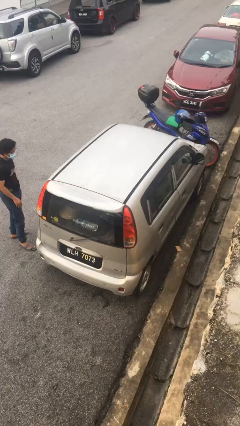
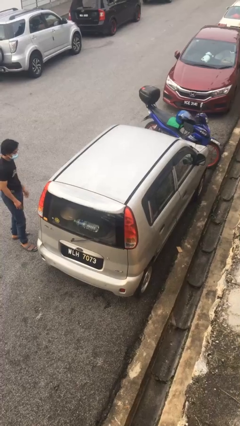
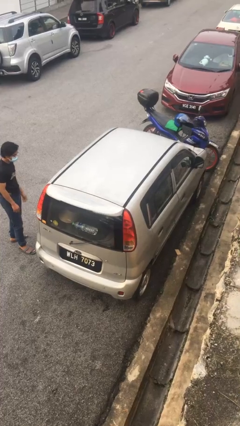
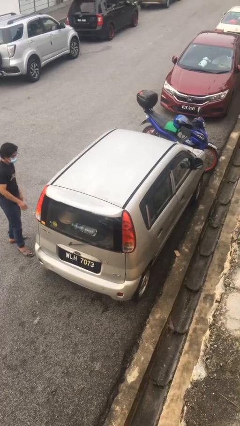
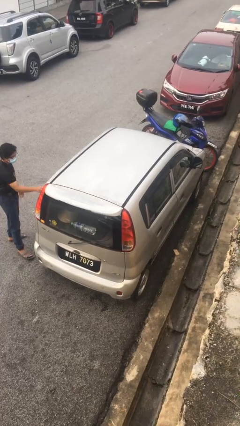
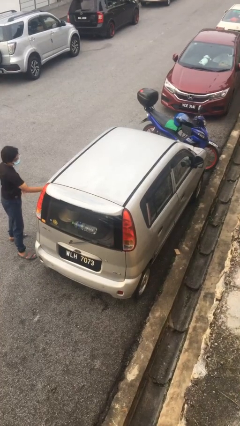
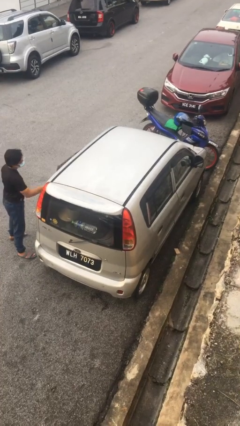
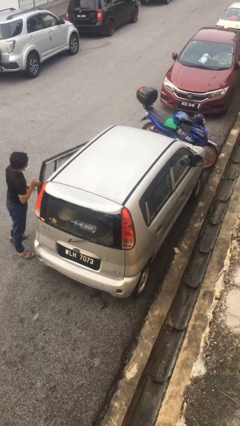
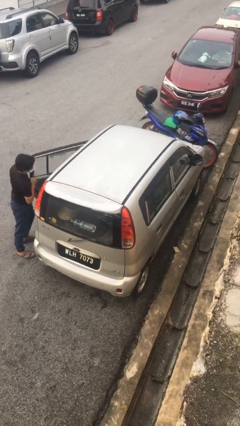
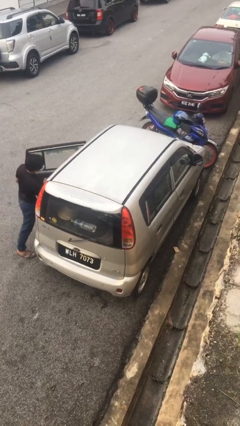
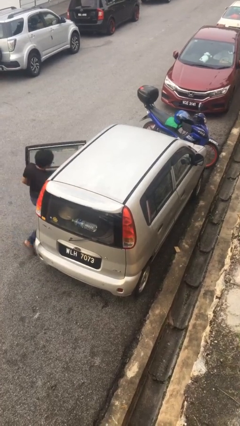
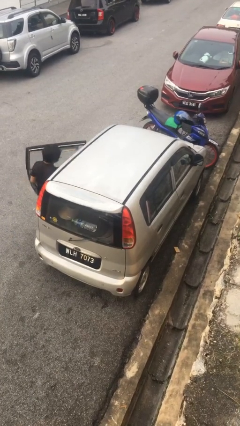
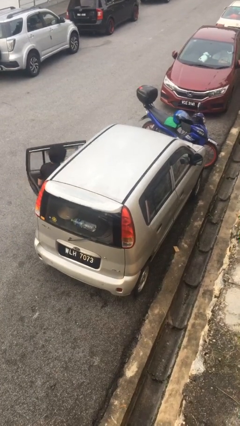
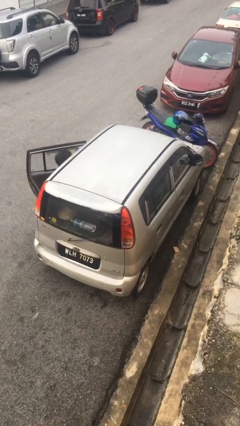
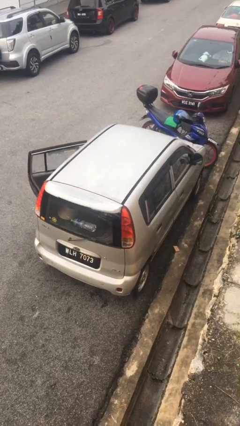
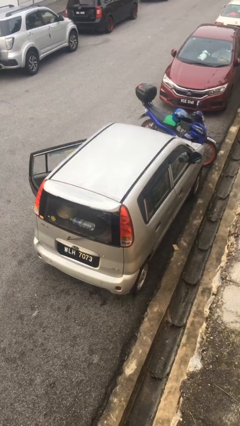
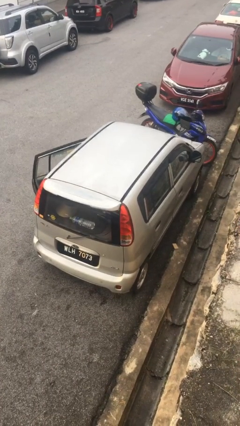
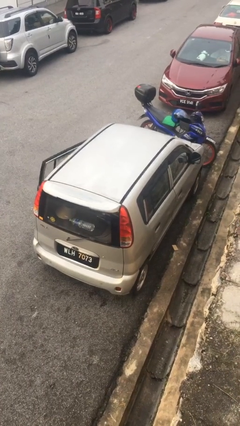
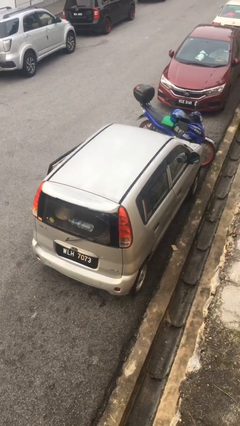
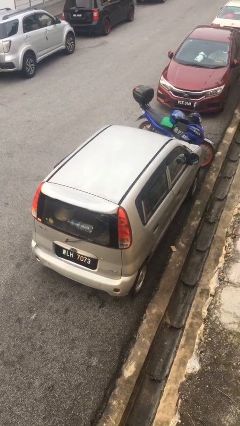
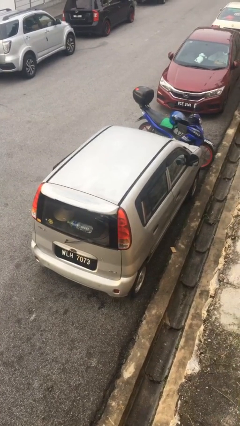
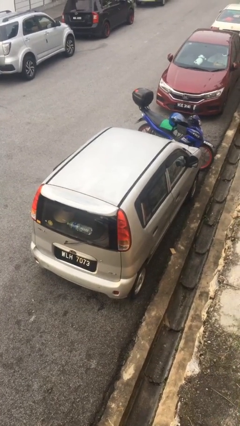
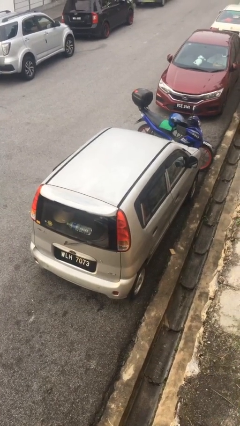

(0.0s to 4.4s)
car picks up person

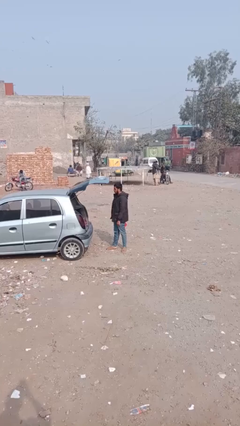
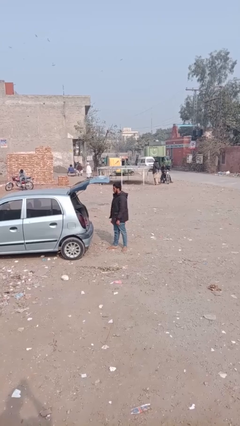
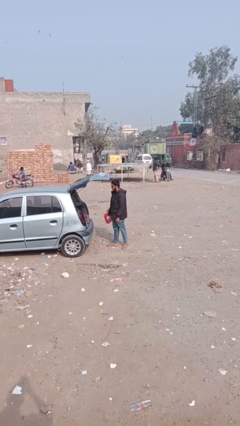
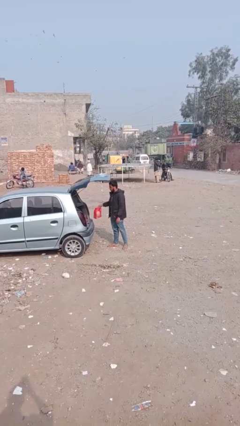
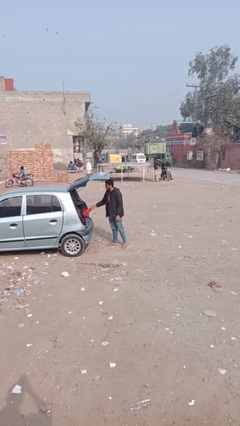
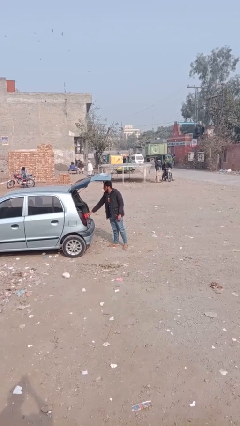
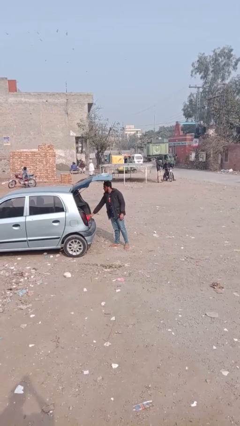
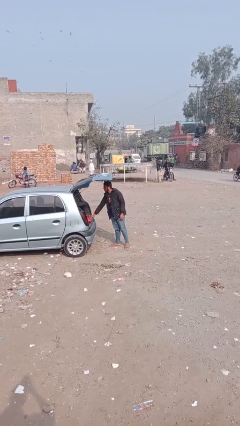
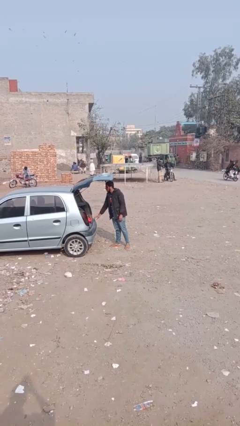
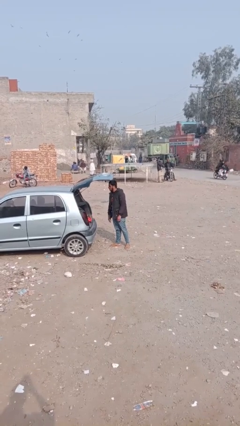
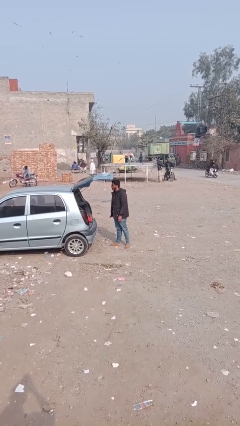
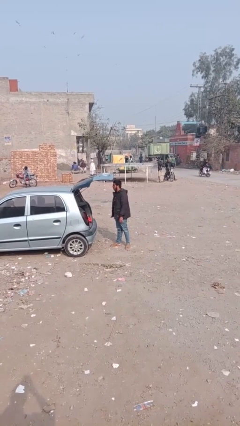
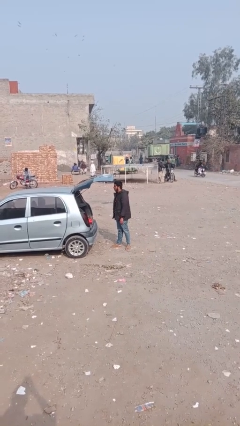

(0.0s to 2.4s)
person loads car

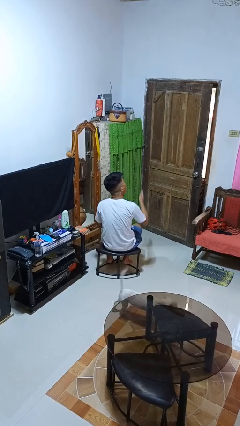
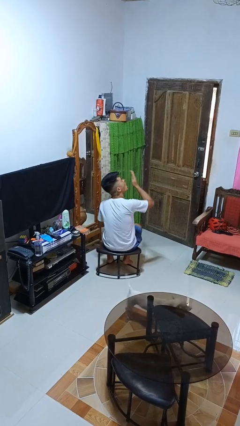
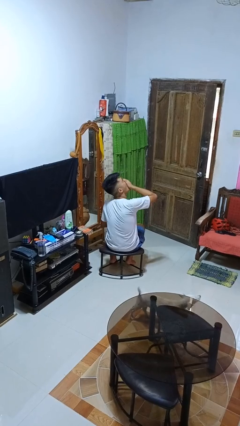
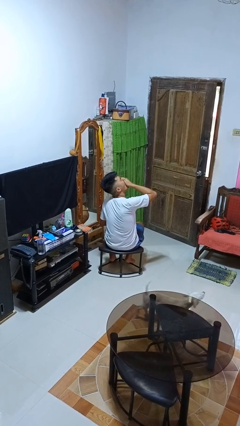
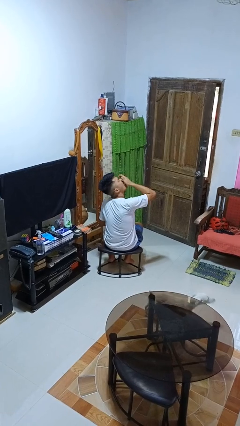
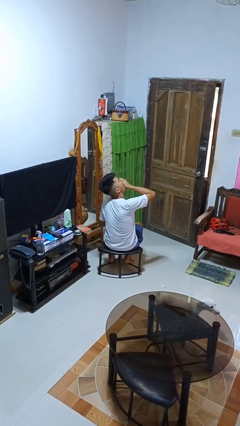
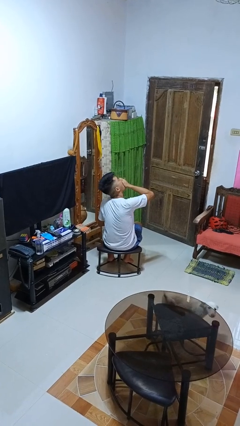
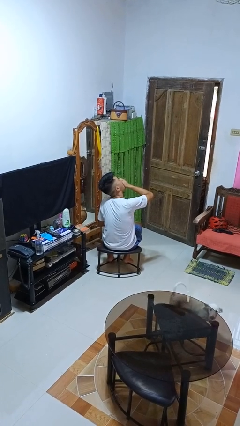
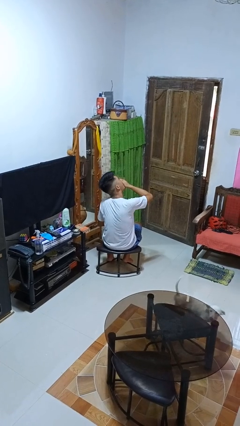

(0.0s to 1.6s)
person yawns

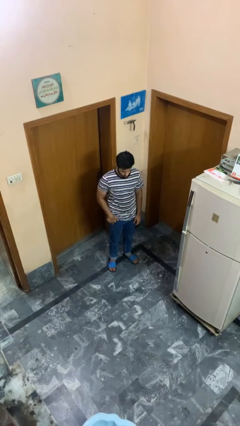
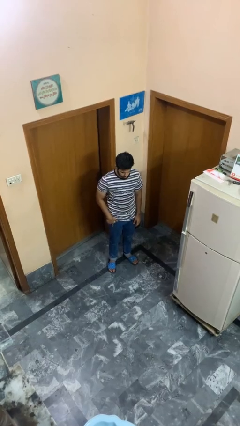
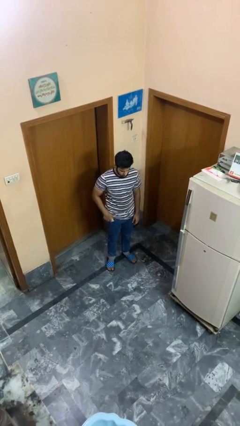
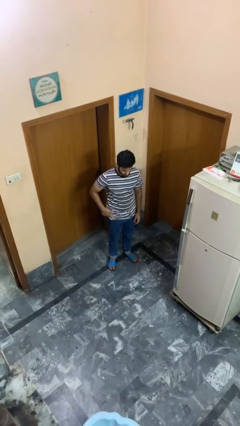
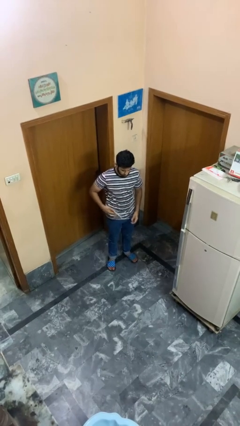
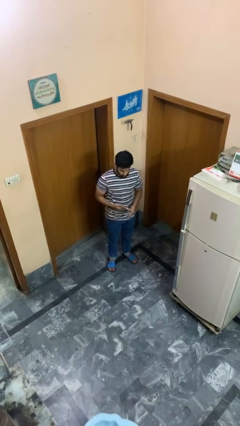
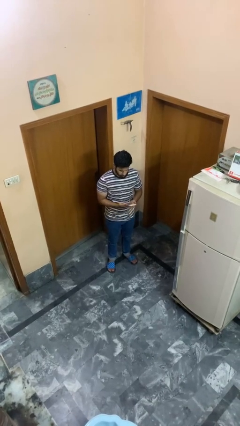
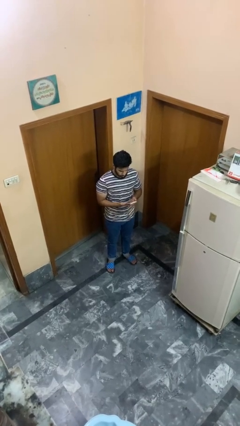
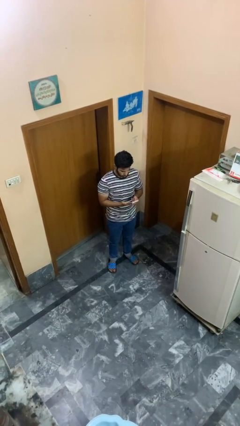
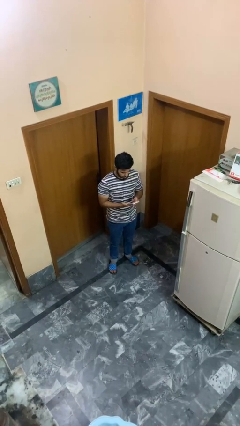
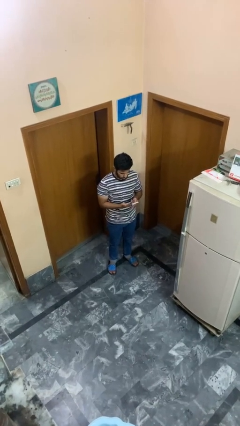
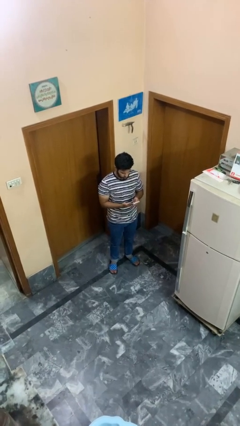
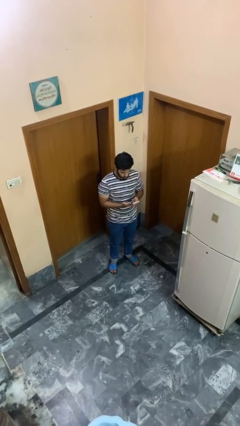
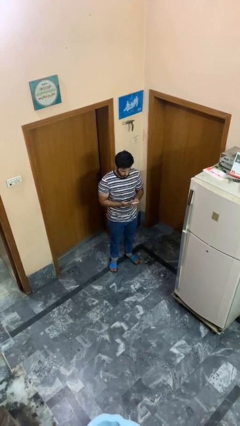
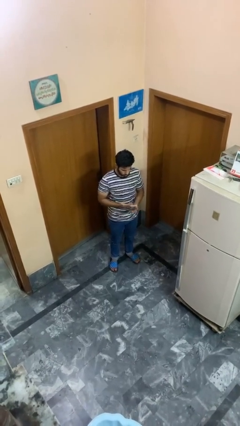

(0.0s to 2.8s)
person takes phone from pocket

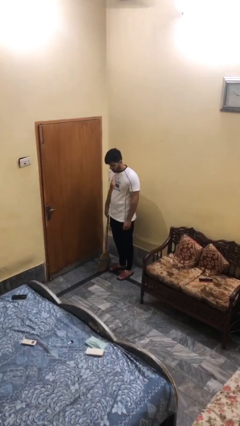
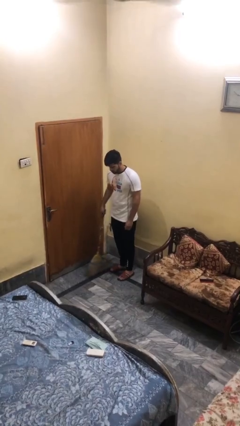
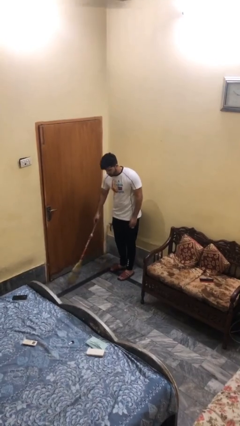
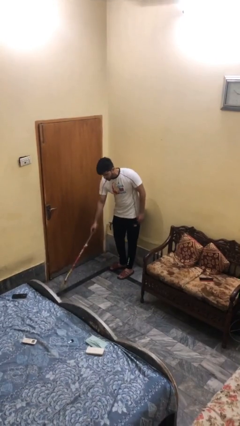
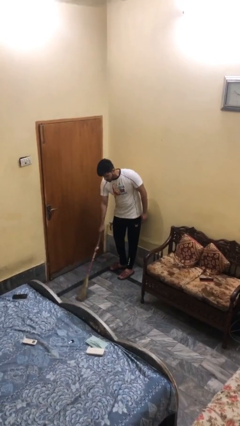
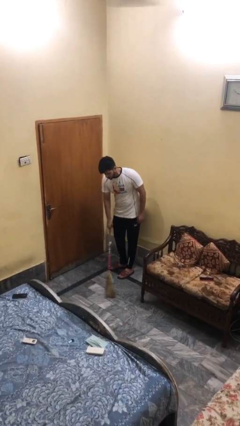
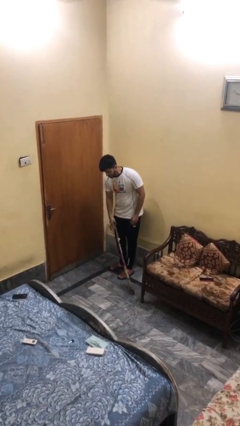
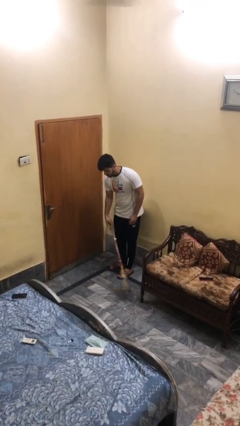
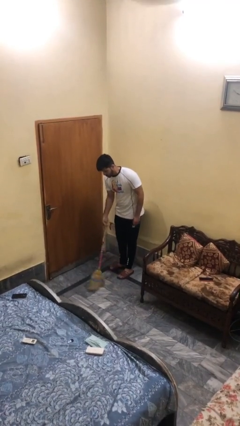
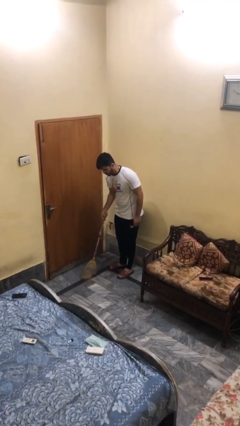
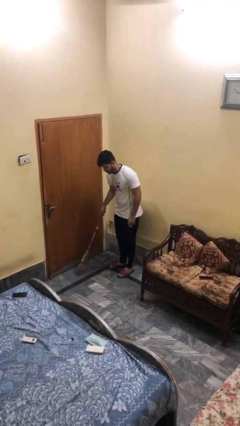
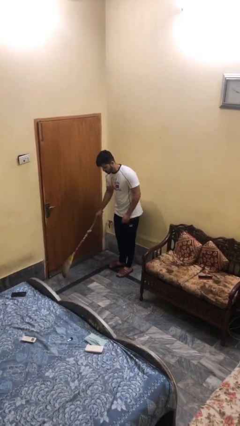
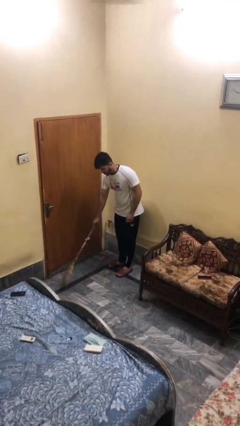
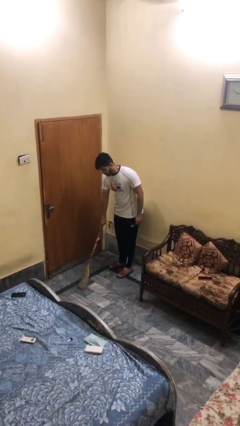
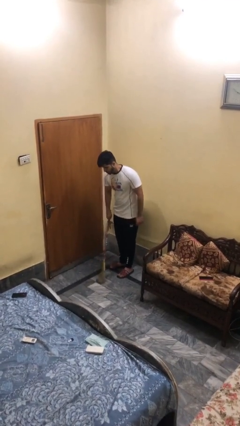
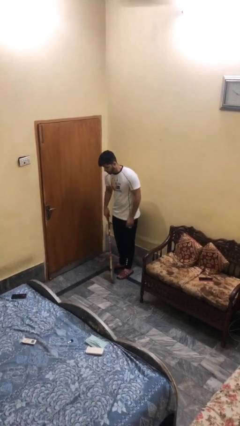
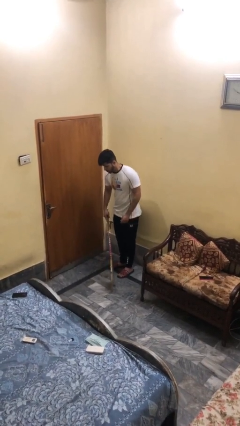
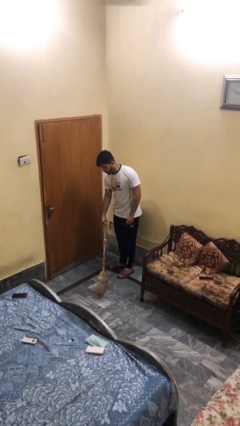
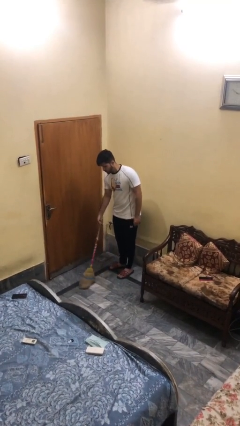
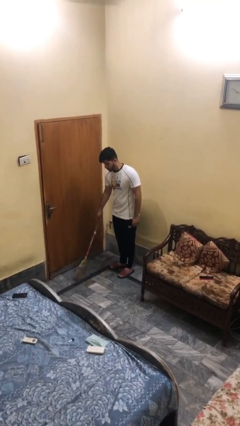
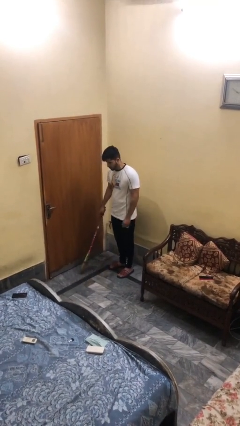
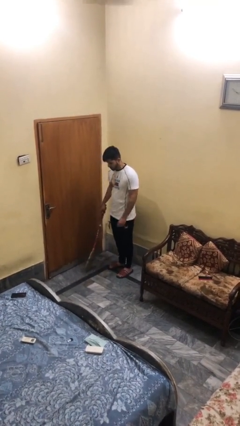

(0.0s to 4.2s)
person sweeps floor

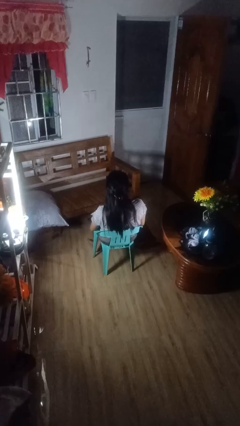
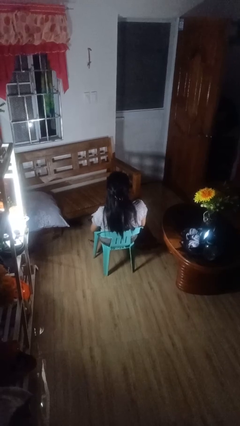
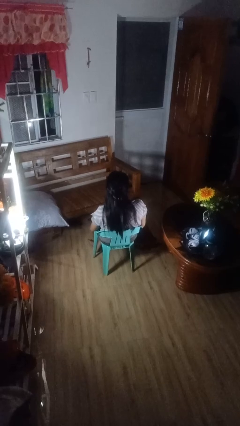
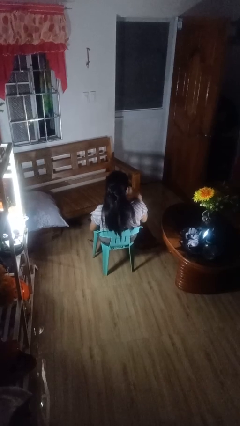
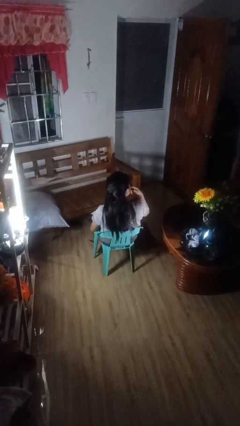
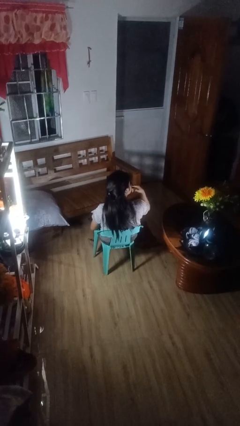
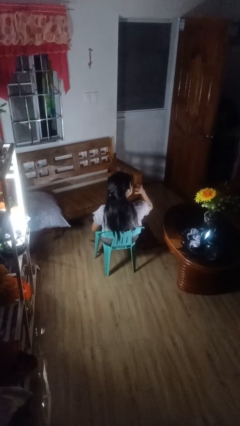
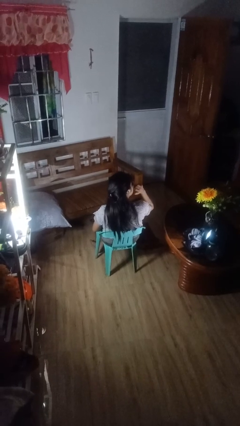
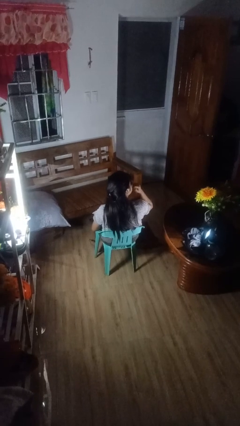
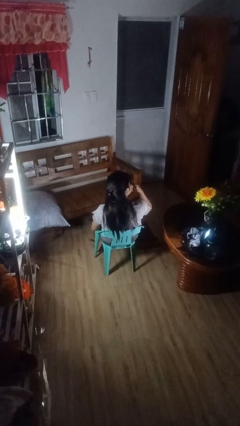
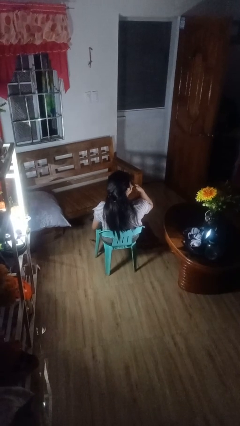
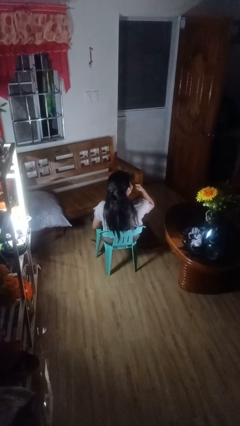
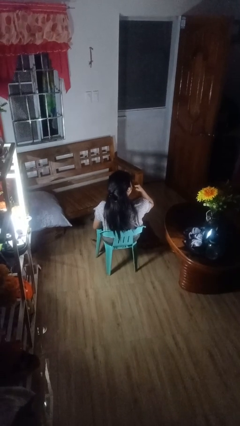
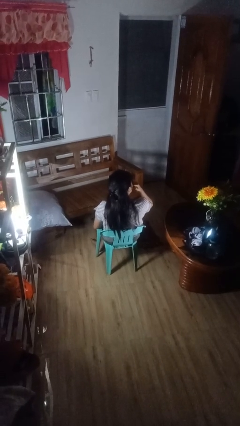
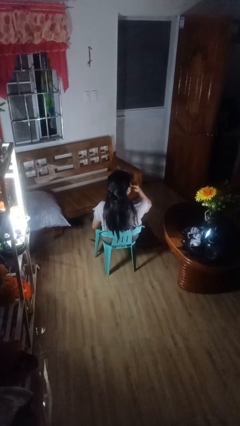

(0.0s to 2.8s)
person licks fingers
